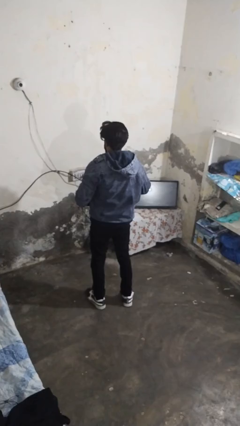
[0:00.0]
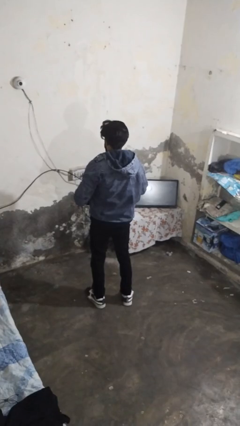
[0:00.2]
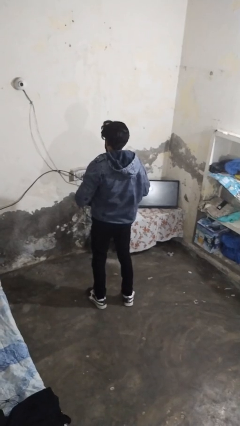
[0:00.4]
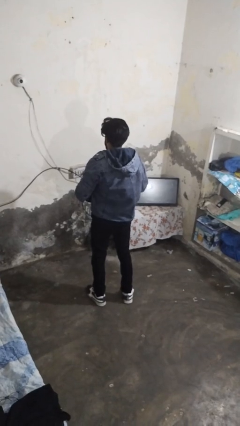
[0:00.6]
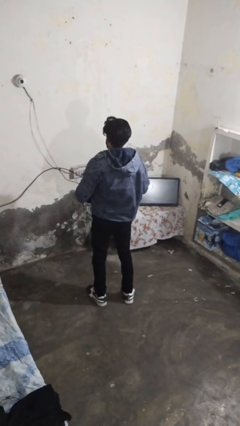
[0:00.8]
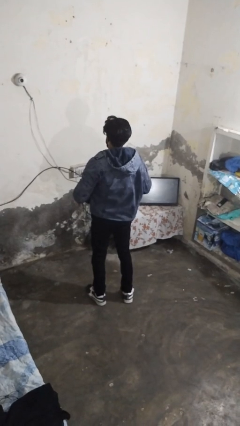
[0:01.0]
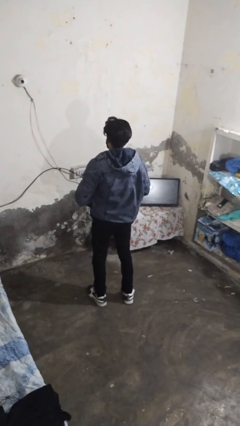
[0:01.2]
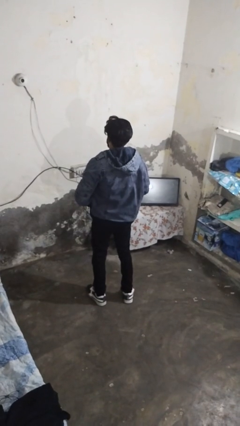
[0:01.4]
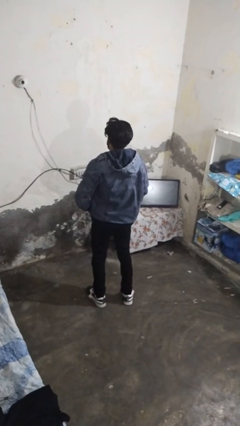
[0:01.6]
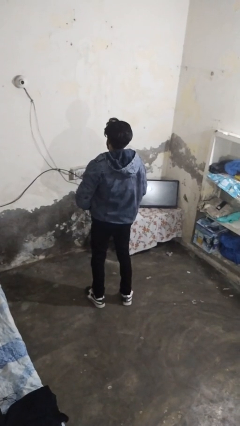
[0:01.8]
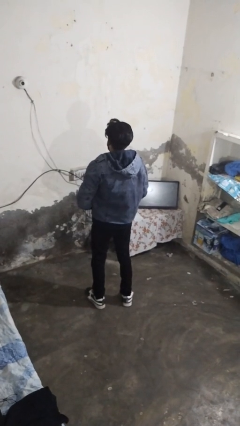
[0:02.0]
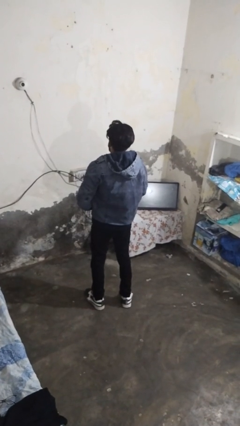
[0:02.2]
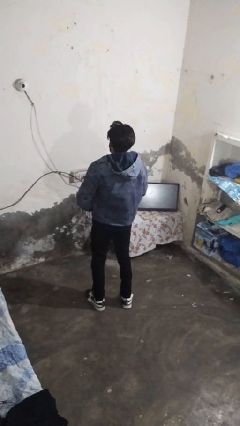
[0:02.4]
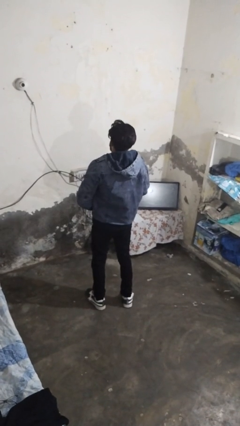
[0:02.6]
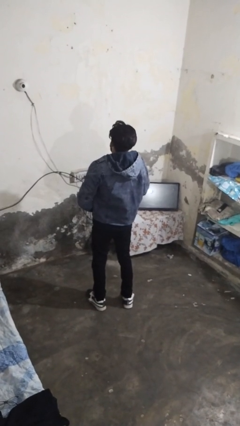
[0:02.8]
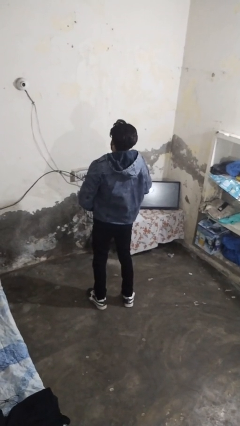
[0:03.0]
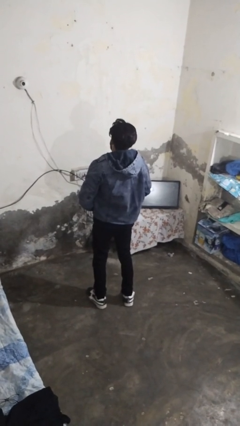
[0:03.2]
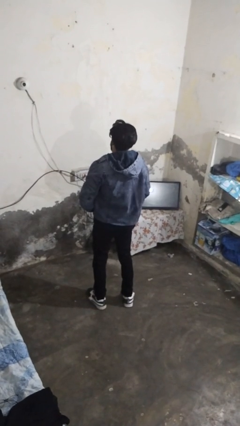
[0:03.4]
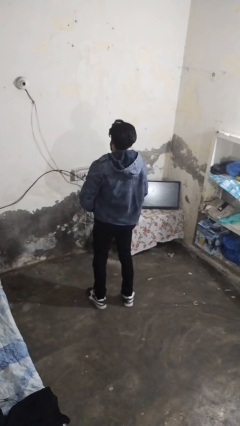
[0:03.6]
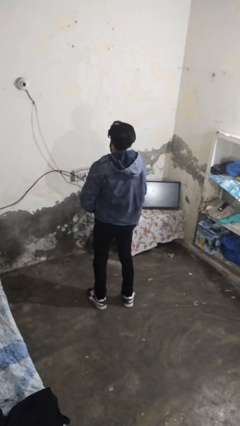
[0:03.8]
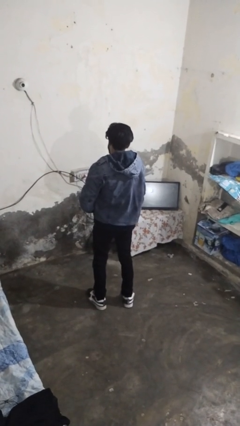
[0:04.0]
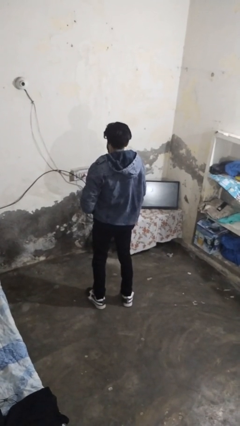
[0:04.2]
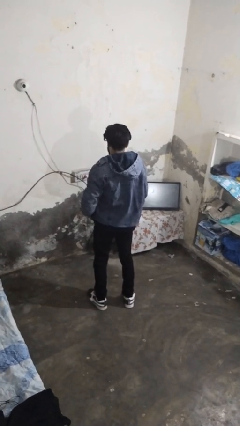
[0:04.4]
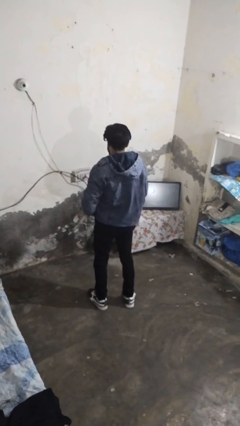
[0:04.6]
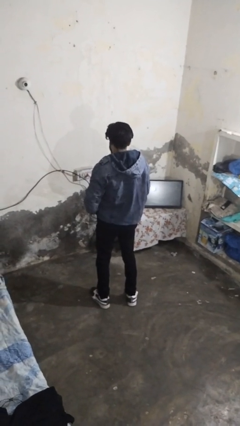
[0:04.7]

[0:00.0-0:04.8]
person unzips jacket

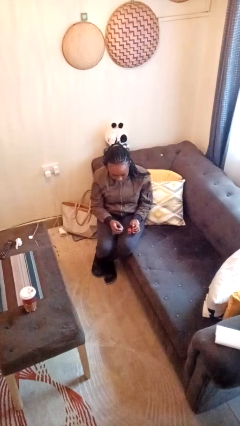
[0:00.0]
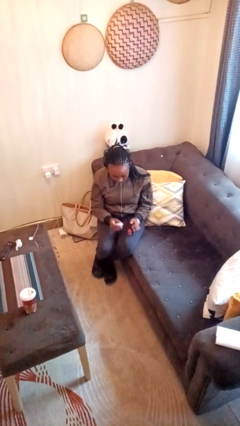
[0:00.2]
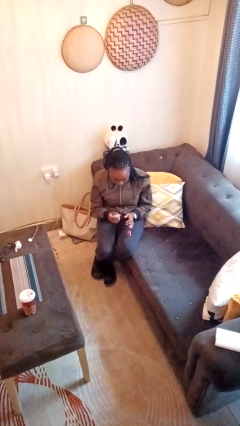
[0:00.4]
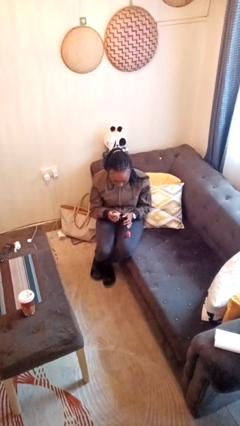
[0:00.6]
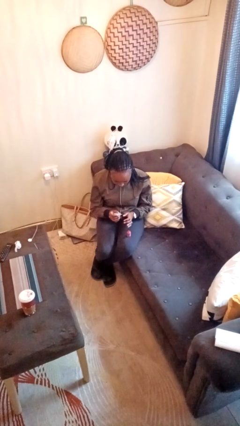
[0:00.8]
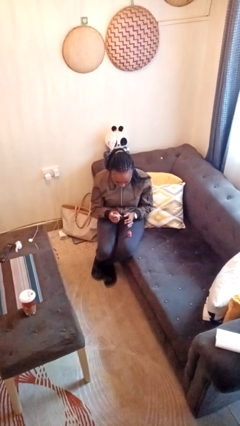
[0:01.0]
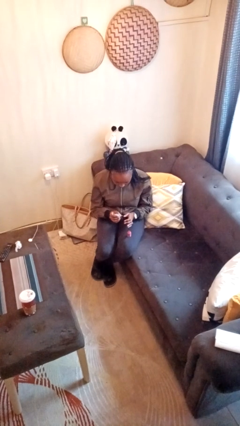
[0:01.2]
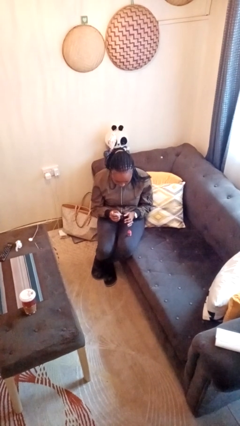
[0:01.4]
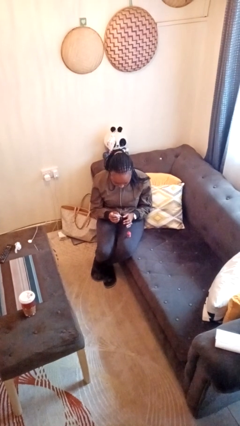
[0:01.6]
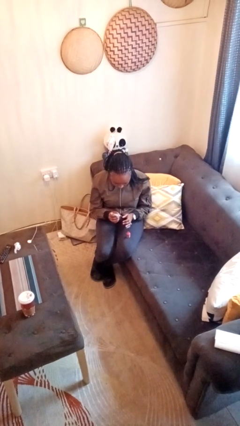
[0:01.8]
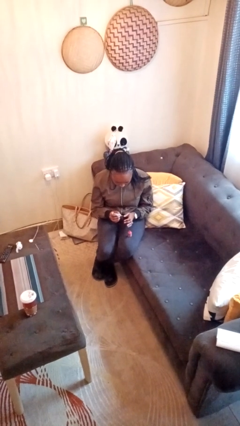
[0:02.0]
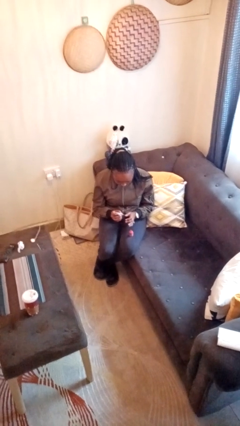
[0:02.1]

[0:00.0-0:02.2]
person paints fingernails

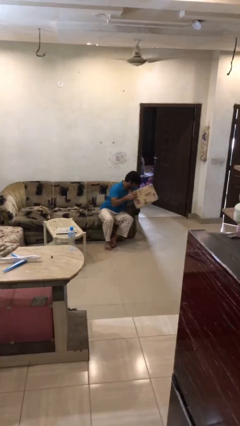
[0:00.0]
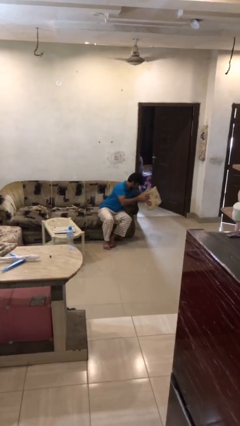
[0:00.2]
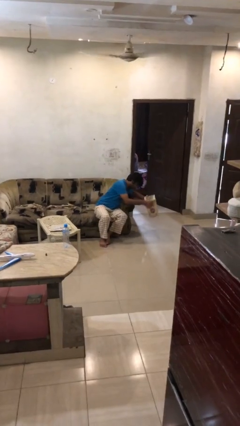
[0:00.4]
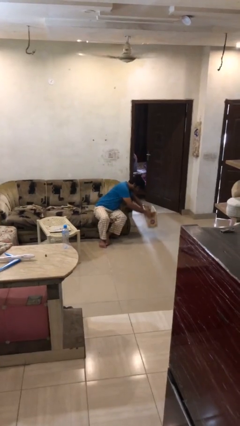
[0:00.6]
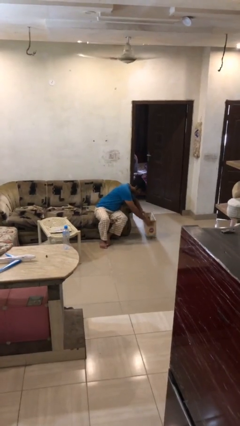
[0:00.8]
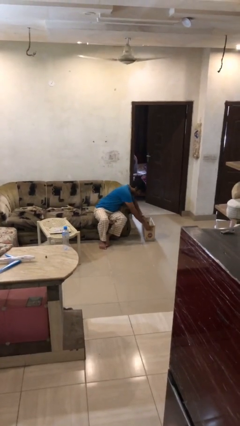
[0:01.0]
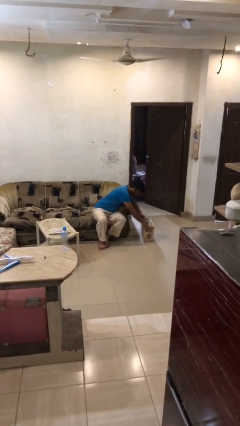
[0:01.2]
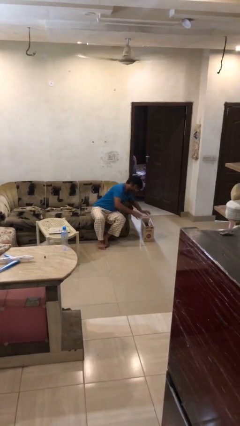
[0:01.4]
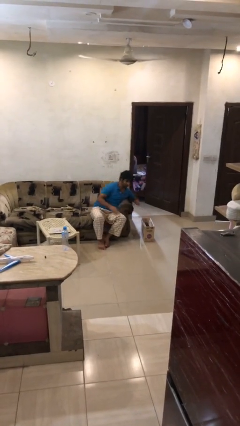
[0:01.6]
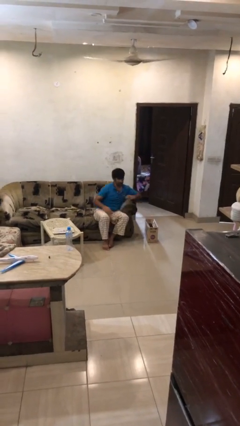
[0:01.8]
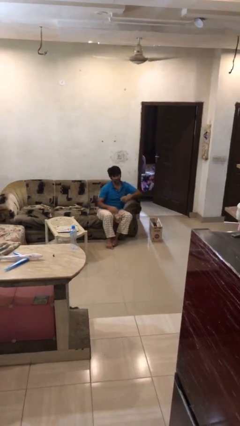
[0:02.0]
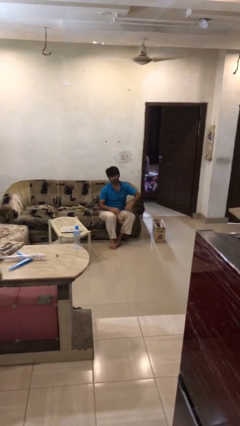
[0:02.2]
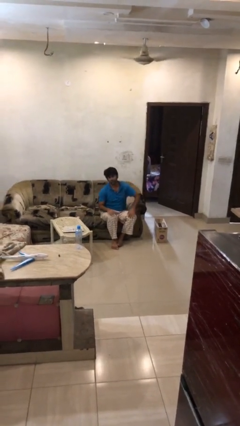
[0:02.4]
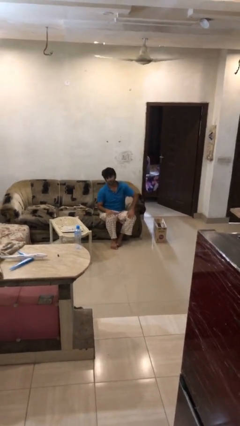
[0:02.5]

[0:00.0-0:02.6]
person puts down object on floor

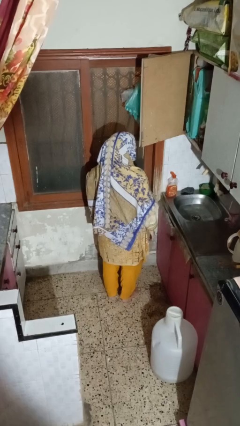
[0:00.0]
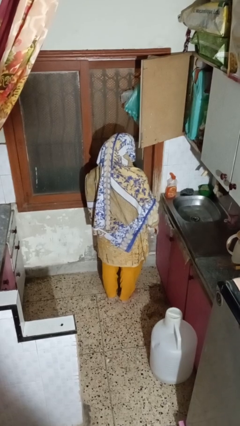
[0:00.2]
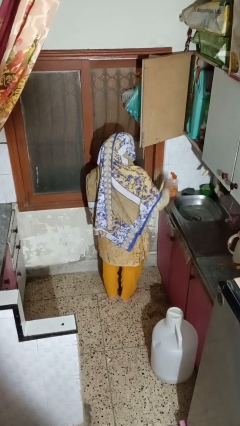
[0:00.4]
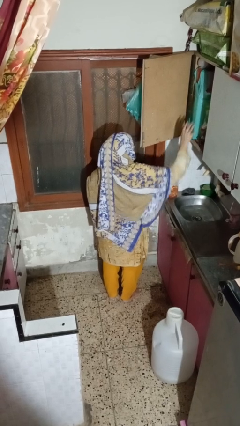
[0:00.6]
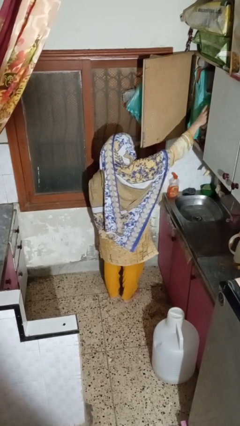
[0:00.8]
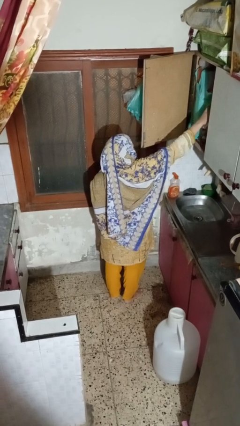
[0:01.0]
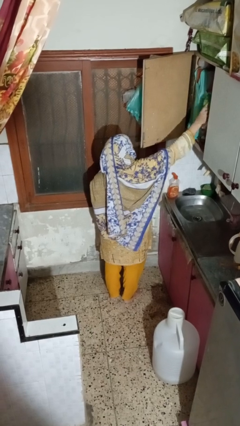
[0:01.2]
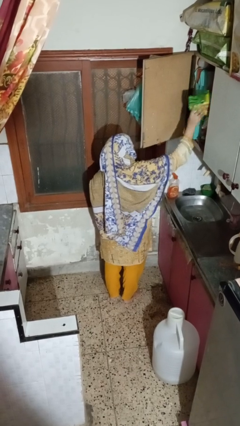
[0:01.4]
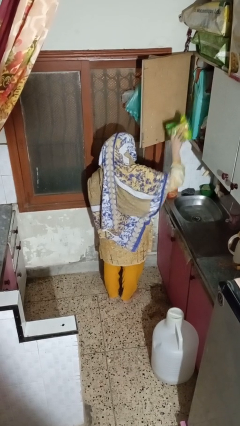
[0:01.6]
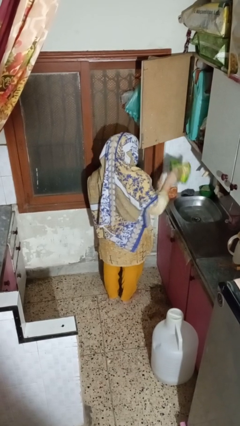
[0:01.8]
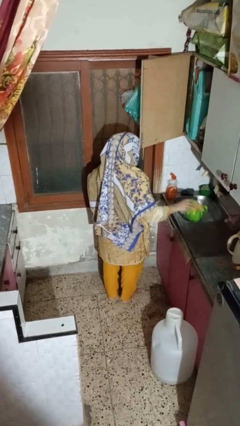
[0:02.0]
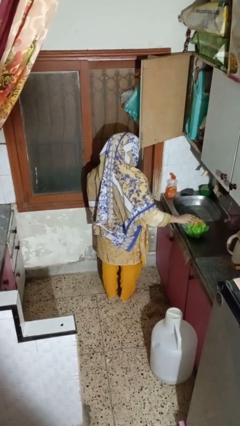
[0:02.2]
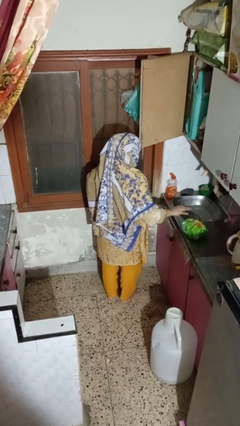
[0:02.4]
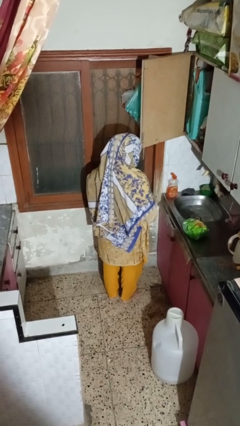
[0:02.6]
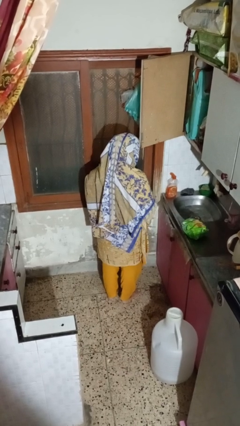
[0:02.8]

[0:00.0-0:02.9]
person takes object from cabinet

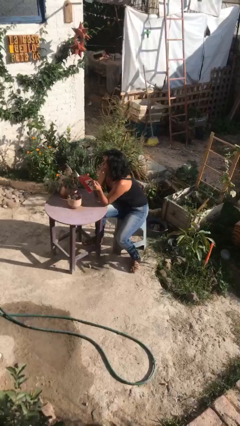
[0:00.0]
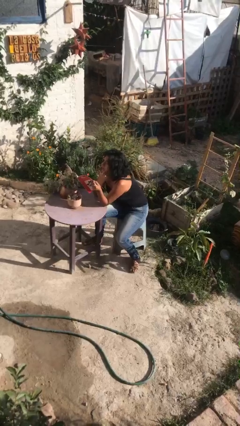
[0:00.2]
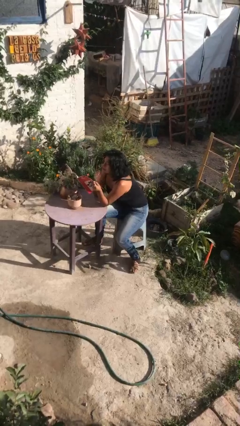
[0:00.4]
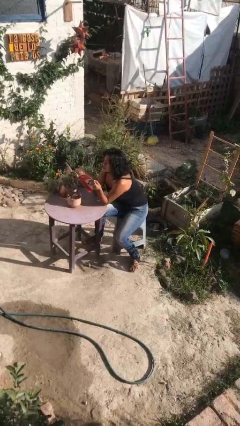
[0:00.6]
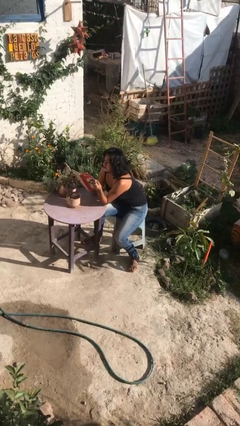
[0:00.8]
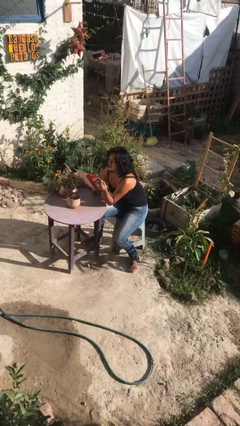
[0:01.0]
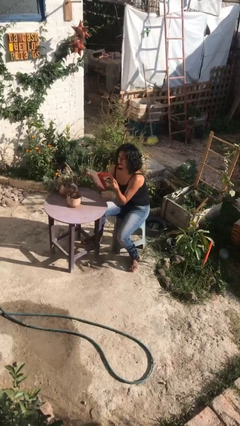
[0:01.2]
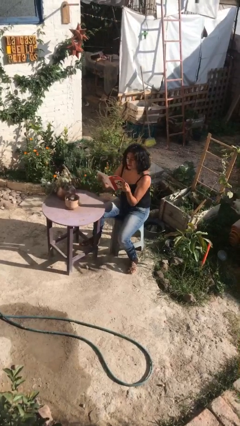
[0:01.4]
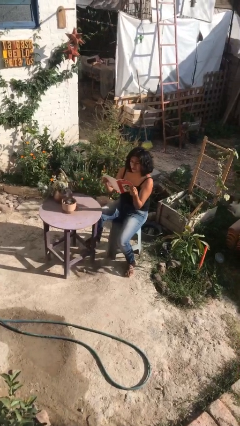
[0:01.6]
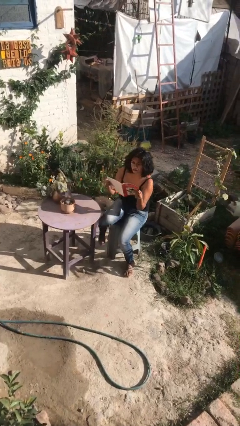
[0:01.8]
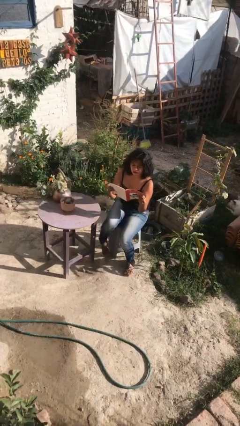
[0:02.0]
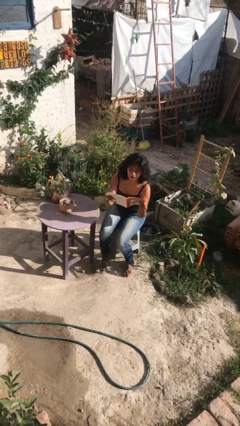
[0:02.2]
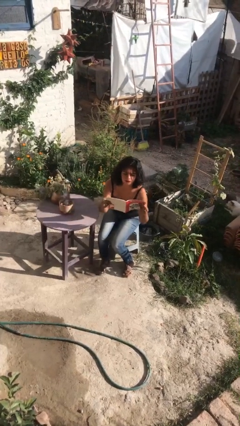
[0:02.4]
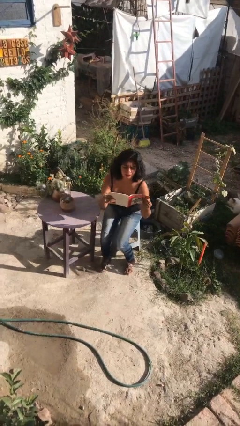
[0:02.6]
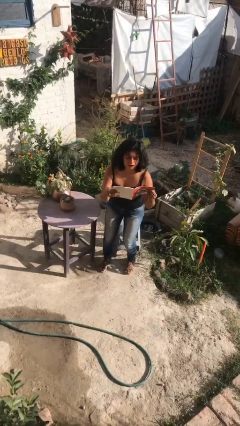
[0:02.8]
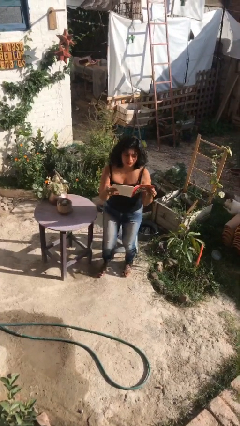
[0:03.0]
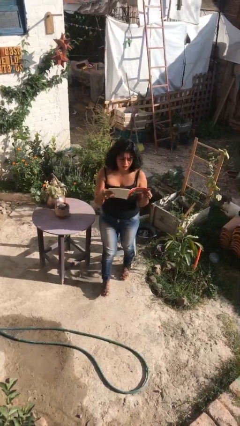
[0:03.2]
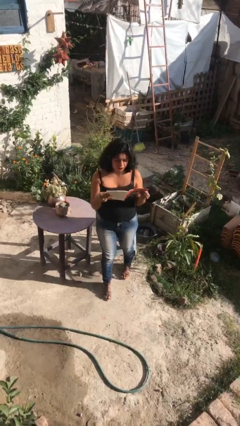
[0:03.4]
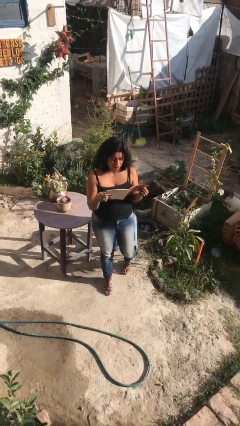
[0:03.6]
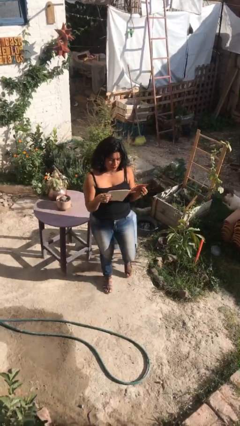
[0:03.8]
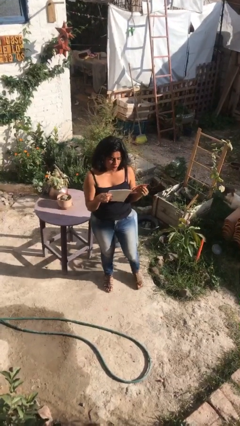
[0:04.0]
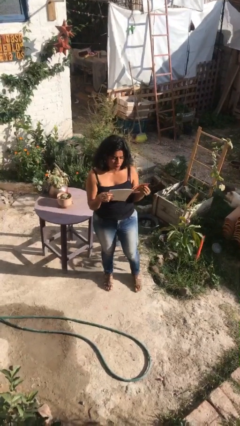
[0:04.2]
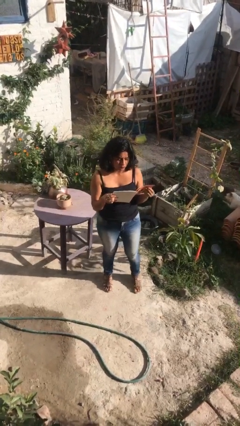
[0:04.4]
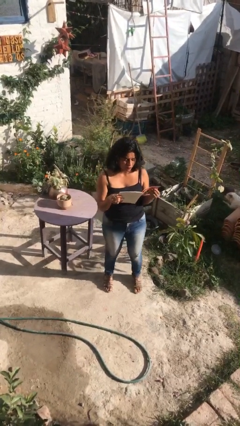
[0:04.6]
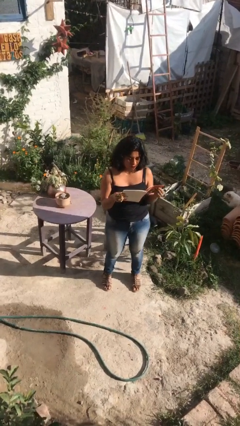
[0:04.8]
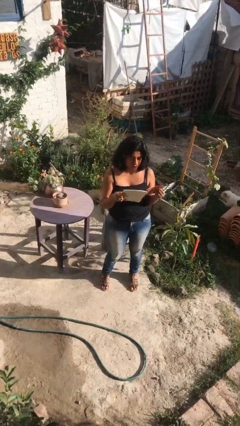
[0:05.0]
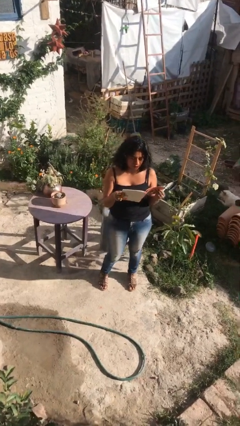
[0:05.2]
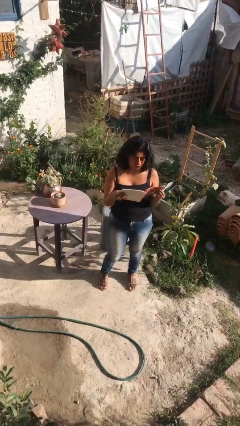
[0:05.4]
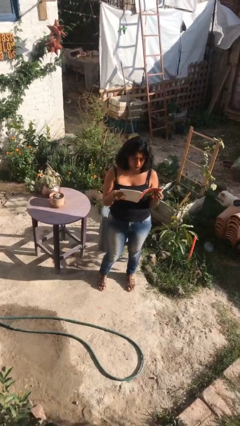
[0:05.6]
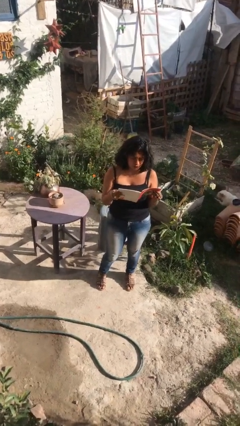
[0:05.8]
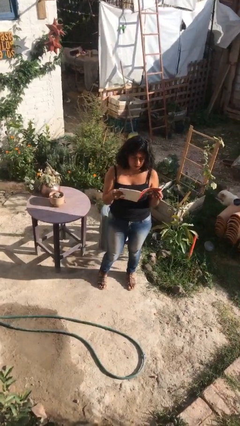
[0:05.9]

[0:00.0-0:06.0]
person stands up
